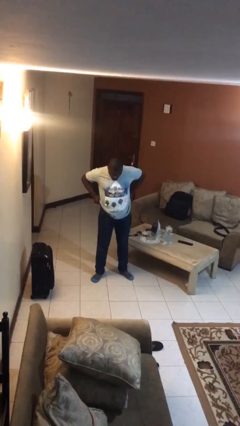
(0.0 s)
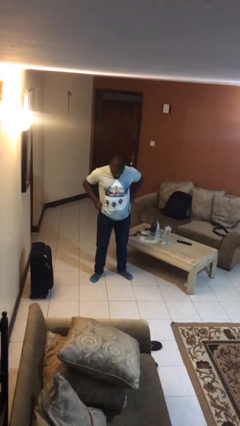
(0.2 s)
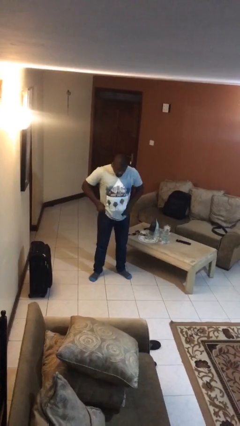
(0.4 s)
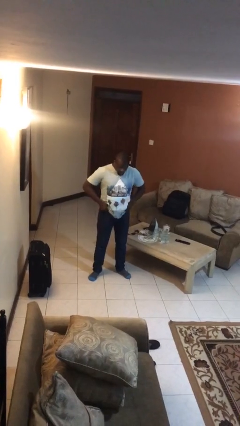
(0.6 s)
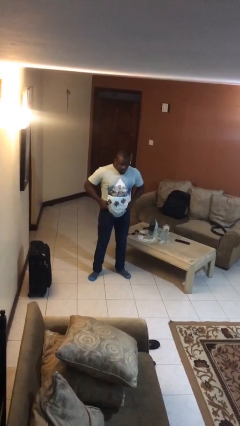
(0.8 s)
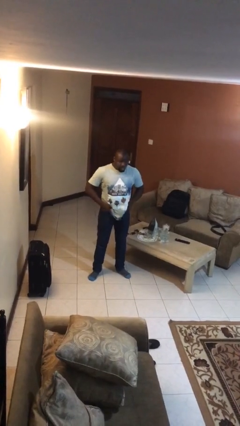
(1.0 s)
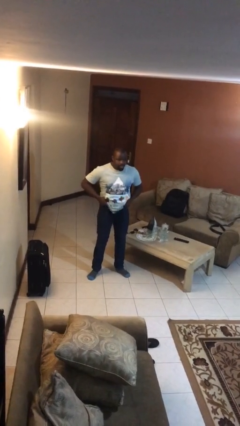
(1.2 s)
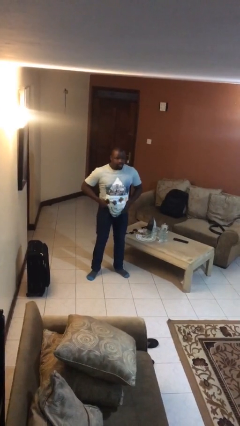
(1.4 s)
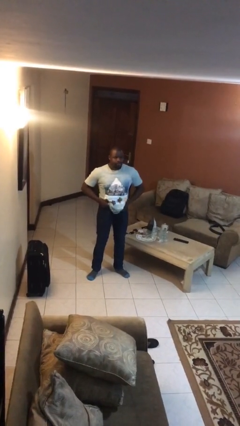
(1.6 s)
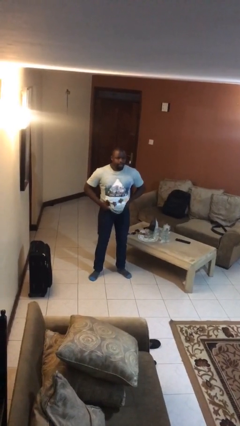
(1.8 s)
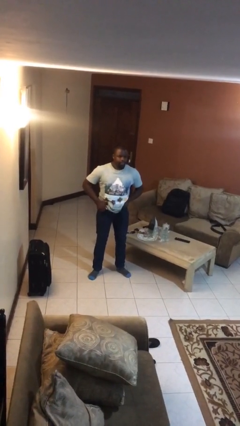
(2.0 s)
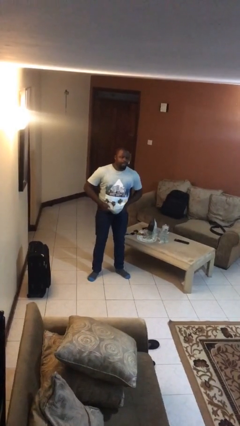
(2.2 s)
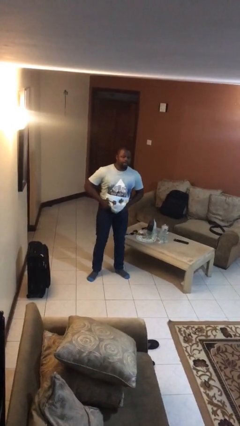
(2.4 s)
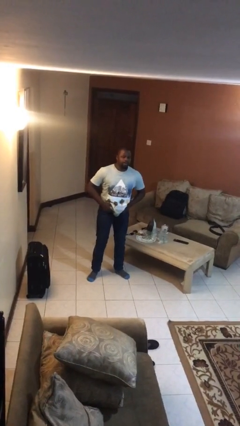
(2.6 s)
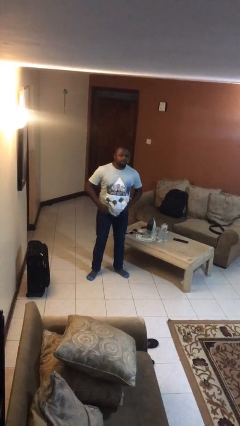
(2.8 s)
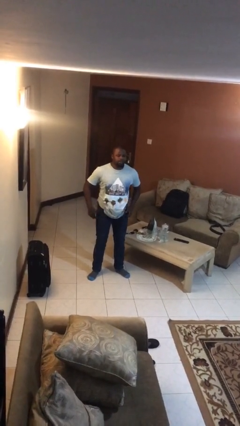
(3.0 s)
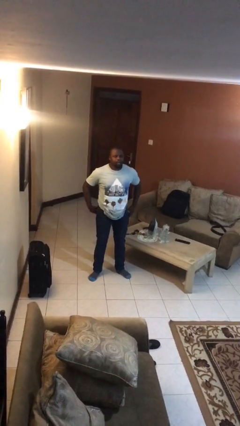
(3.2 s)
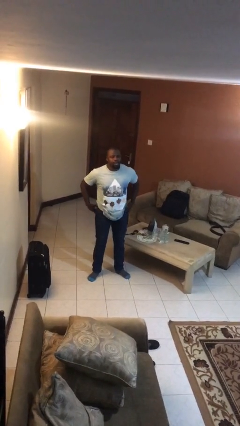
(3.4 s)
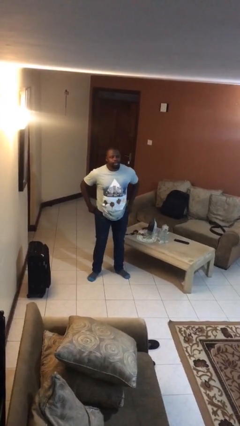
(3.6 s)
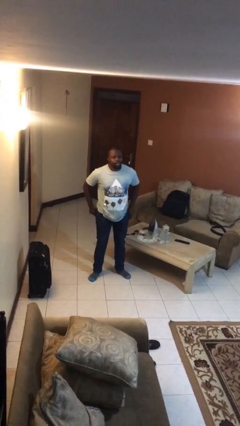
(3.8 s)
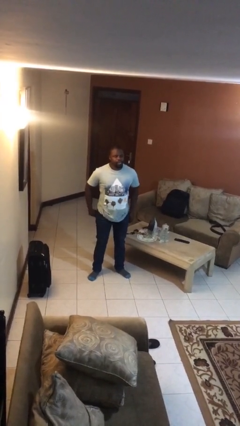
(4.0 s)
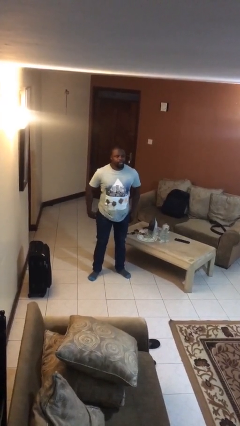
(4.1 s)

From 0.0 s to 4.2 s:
person hikes up pants

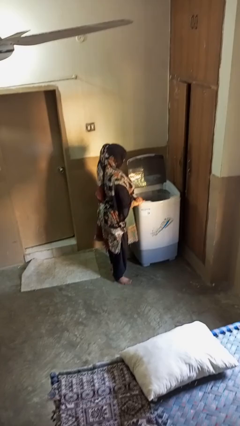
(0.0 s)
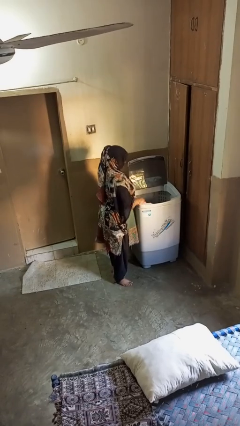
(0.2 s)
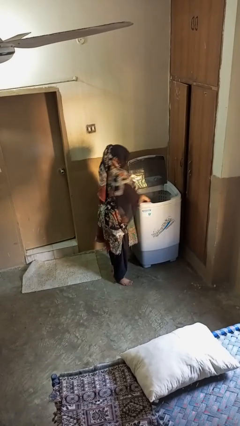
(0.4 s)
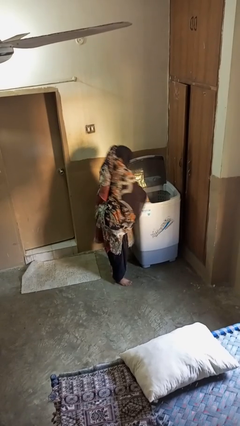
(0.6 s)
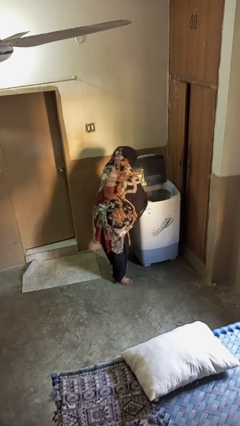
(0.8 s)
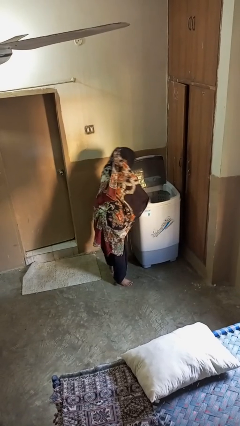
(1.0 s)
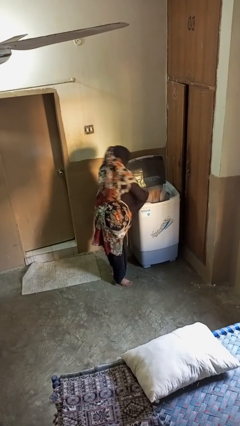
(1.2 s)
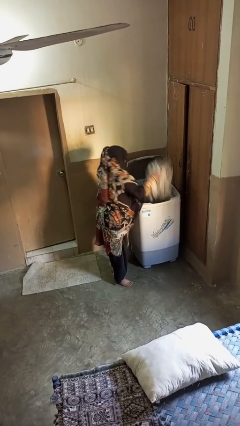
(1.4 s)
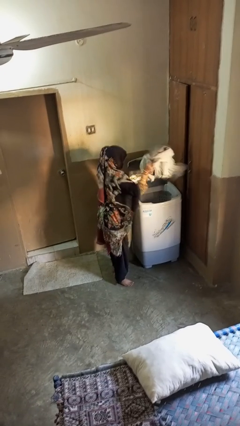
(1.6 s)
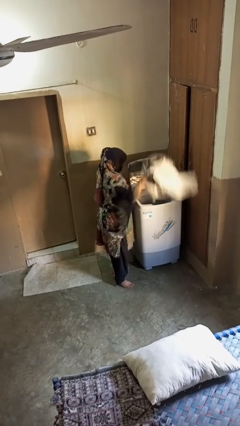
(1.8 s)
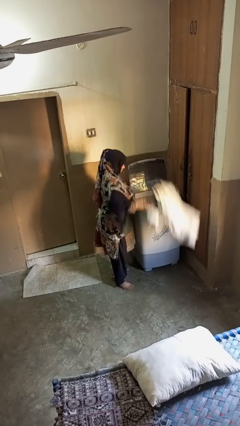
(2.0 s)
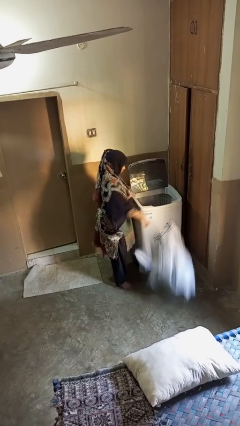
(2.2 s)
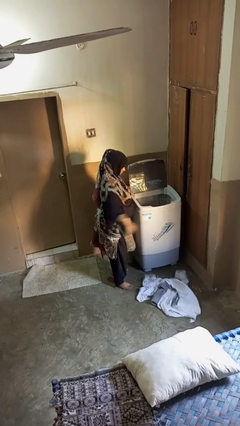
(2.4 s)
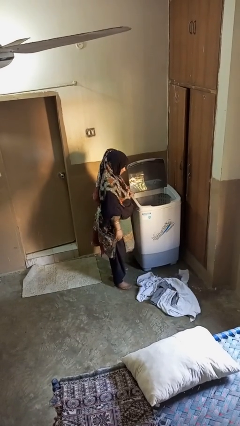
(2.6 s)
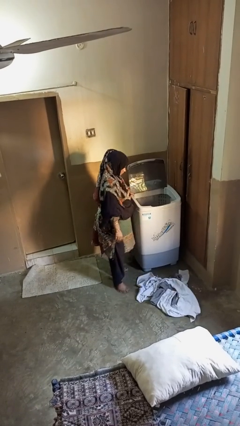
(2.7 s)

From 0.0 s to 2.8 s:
person unloads clotheswasher

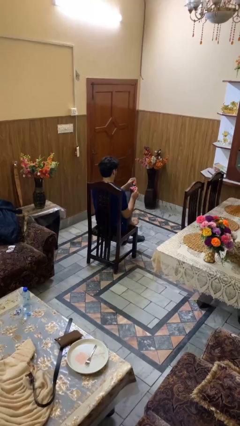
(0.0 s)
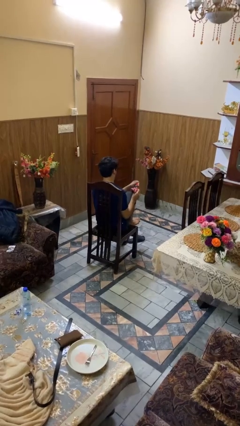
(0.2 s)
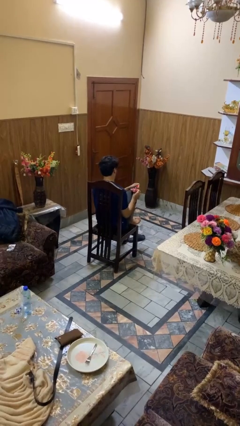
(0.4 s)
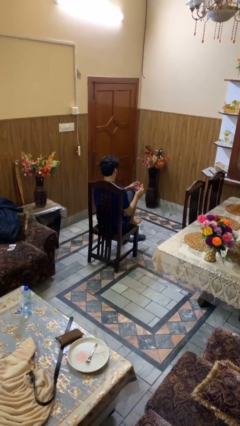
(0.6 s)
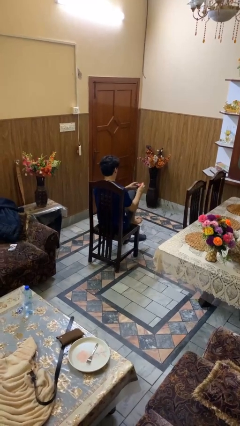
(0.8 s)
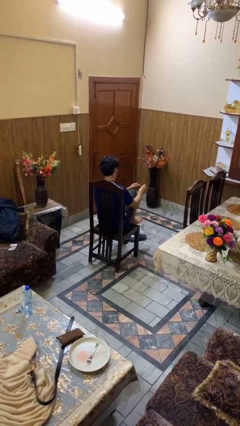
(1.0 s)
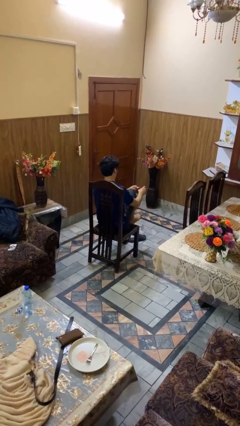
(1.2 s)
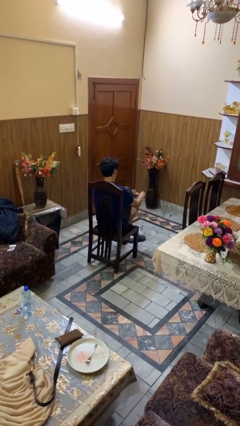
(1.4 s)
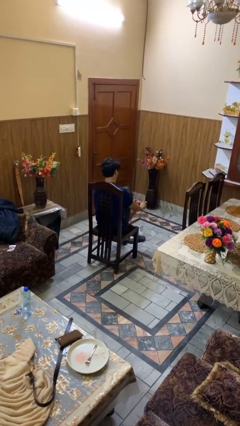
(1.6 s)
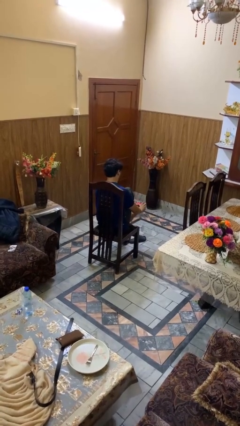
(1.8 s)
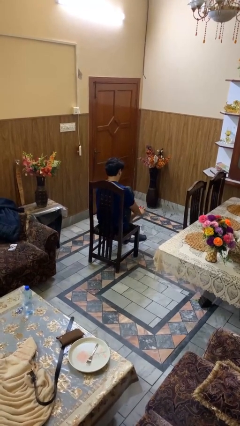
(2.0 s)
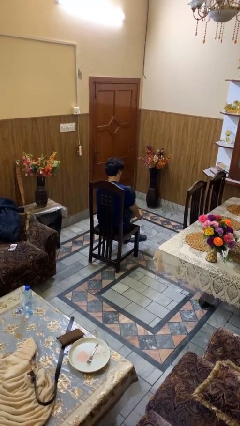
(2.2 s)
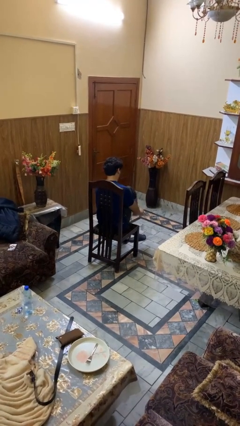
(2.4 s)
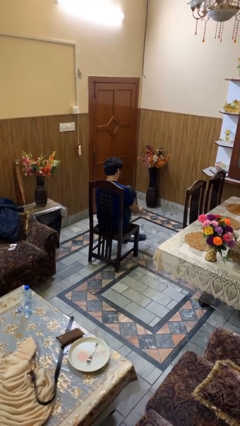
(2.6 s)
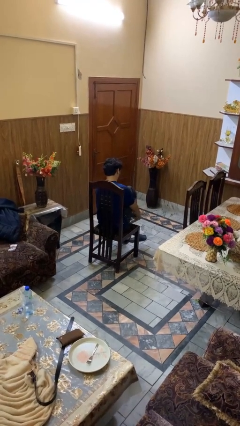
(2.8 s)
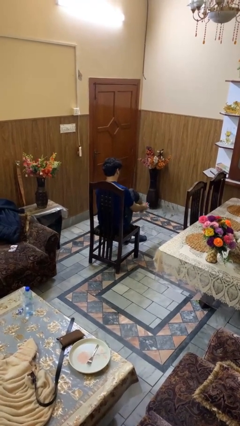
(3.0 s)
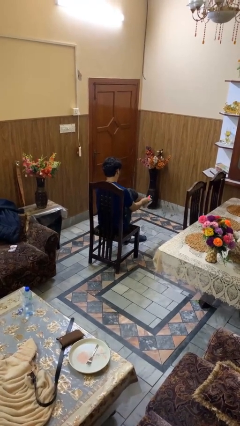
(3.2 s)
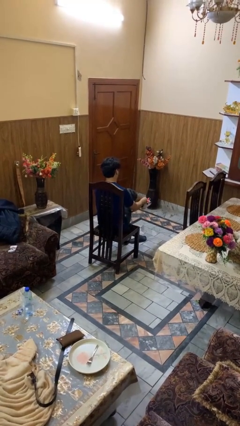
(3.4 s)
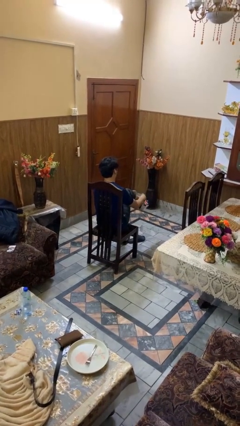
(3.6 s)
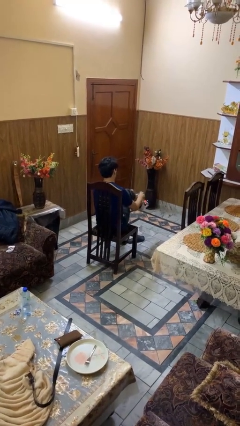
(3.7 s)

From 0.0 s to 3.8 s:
person puts on socks

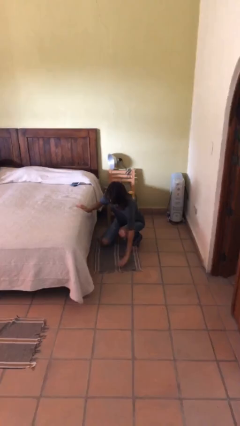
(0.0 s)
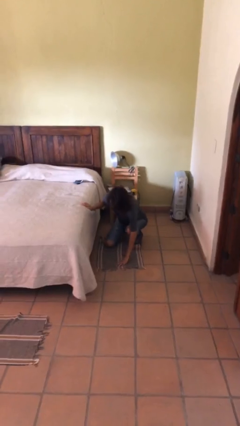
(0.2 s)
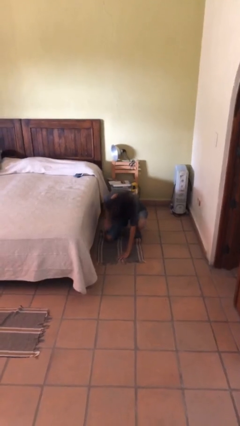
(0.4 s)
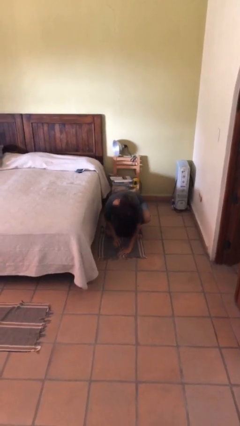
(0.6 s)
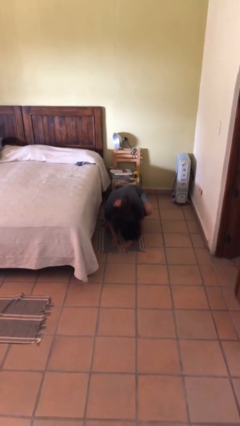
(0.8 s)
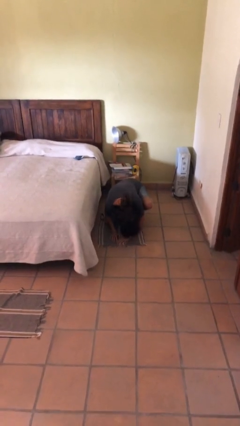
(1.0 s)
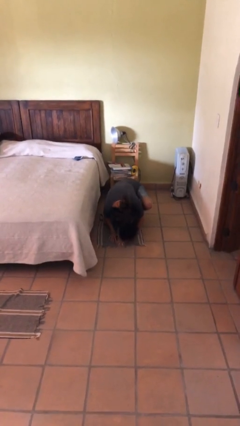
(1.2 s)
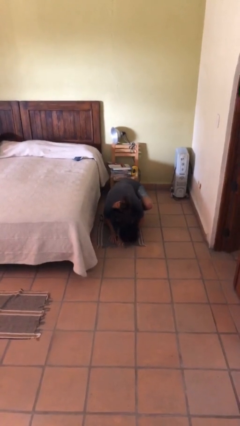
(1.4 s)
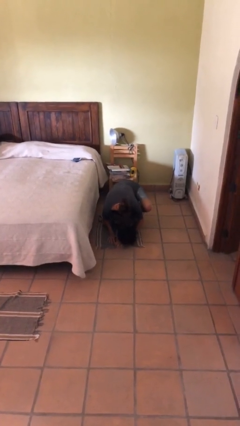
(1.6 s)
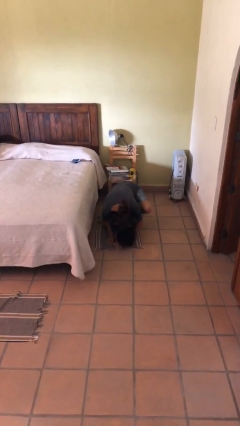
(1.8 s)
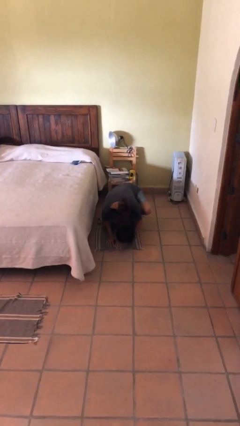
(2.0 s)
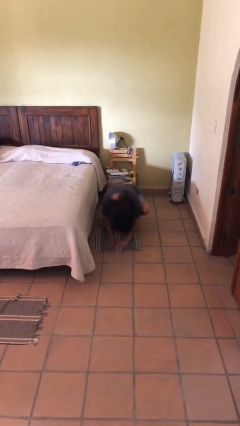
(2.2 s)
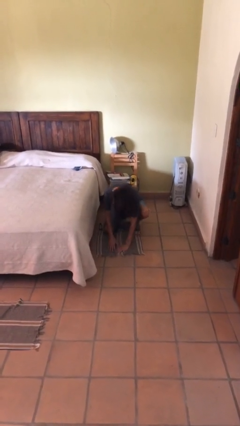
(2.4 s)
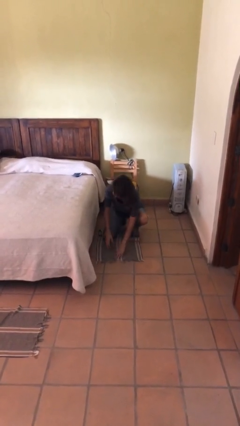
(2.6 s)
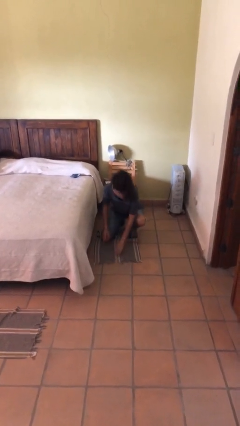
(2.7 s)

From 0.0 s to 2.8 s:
person searches under bed

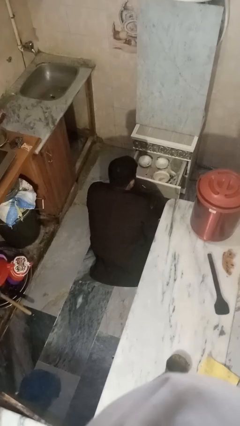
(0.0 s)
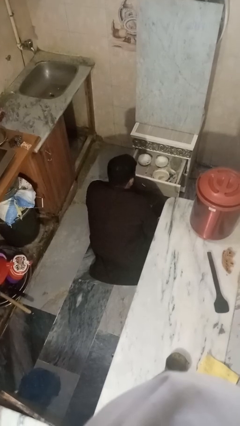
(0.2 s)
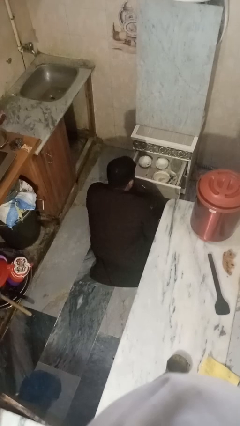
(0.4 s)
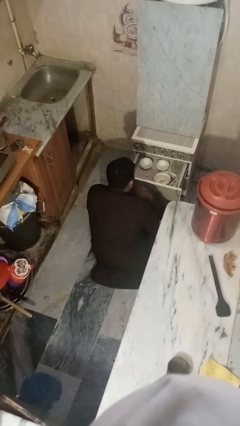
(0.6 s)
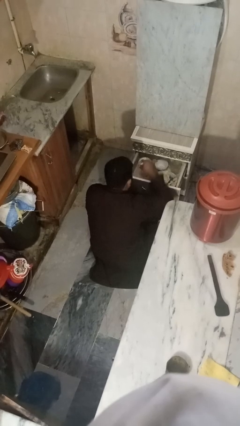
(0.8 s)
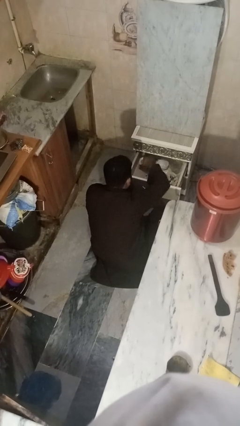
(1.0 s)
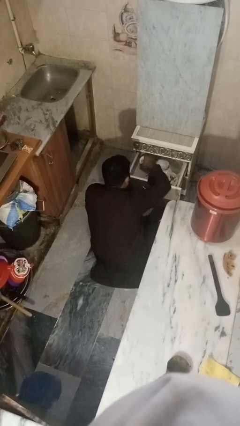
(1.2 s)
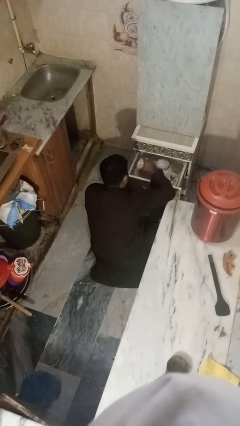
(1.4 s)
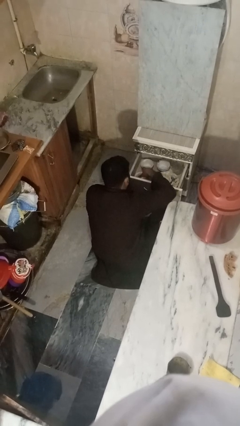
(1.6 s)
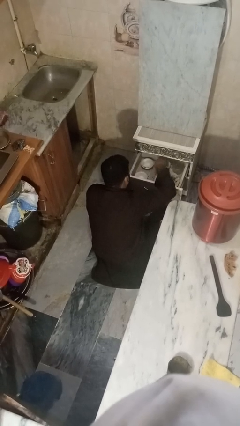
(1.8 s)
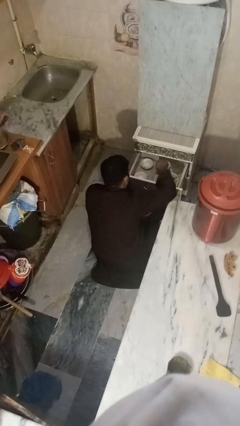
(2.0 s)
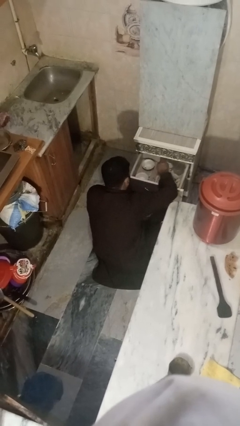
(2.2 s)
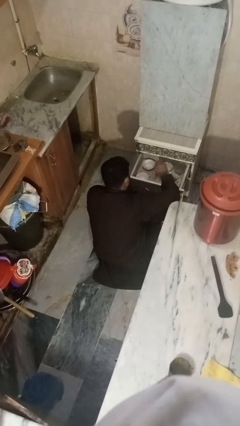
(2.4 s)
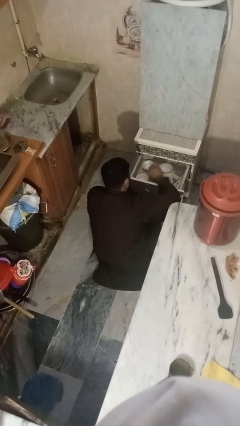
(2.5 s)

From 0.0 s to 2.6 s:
person searches in kitchen drawer

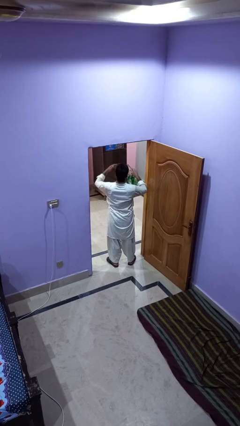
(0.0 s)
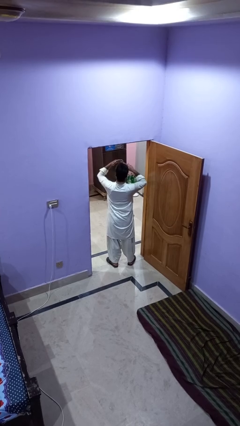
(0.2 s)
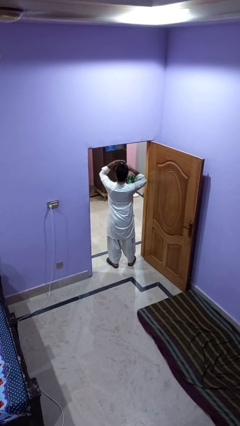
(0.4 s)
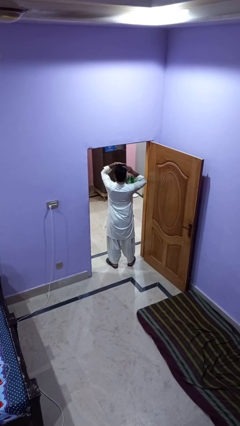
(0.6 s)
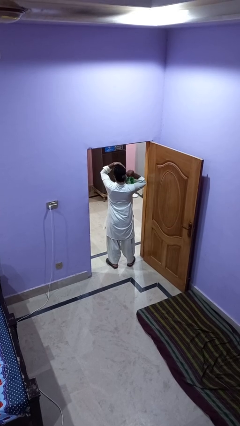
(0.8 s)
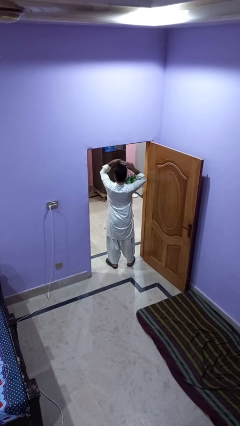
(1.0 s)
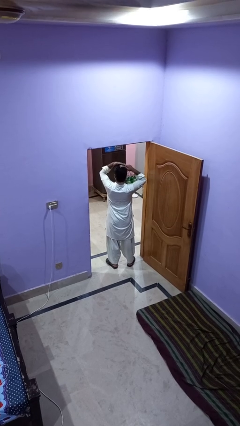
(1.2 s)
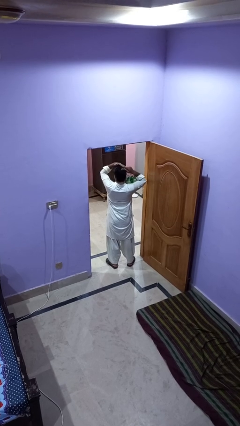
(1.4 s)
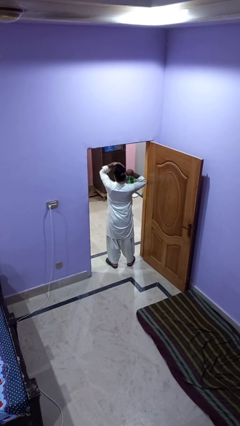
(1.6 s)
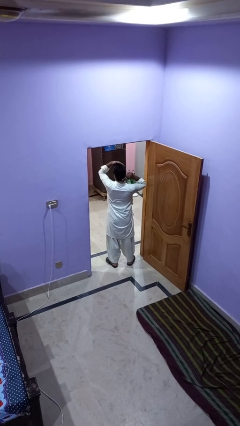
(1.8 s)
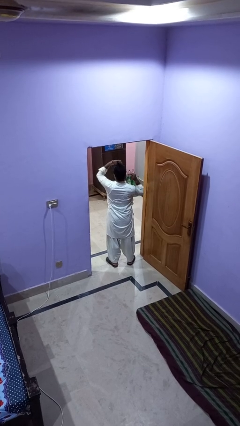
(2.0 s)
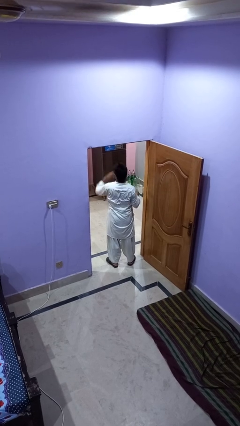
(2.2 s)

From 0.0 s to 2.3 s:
person brushes hair
